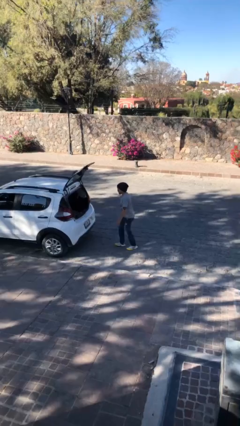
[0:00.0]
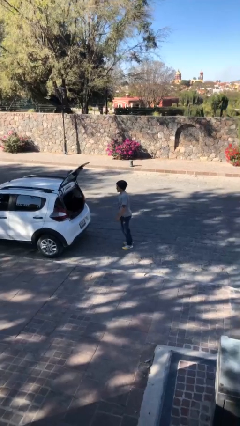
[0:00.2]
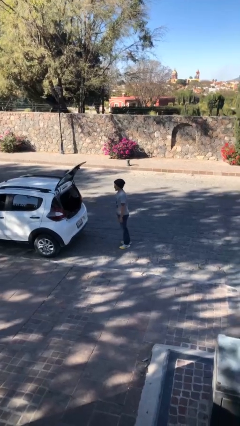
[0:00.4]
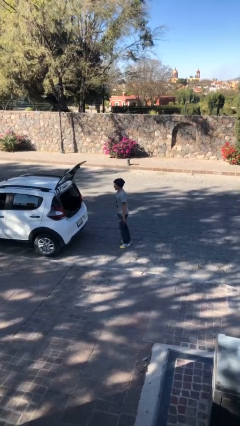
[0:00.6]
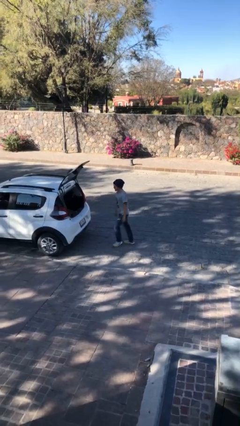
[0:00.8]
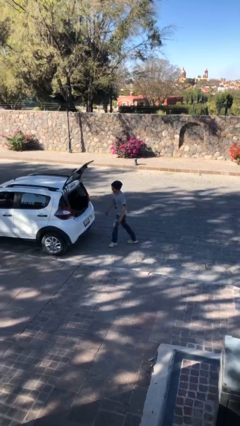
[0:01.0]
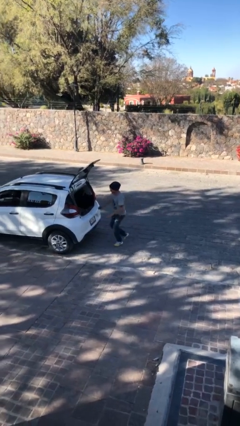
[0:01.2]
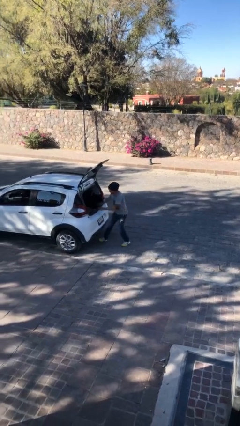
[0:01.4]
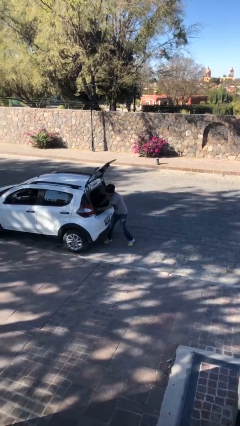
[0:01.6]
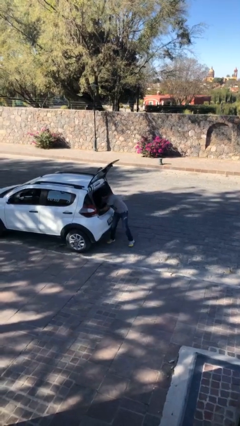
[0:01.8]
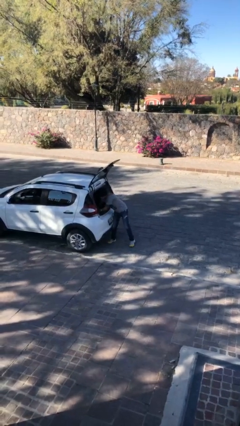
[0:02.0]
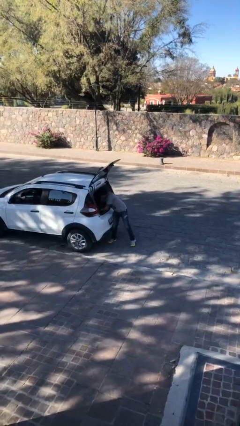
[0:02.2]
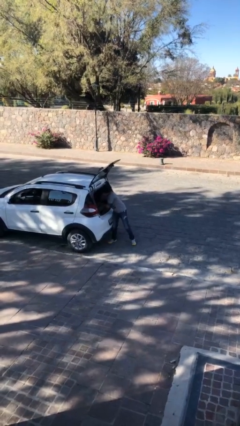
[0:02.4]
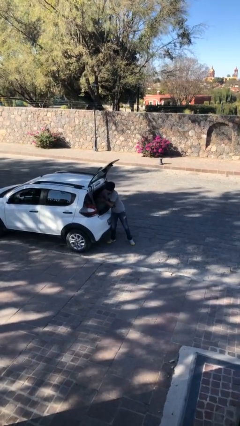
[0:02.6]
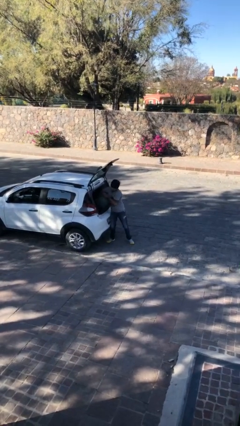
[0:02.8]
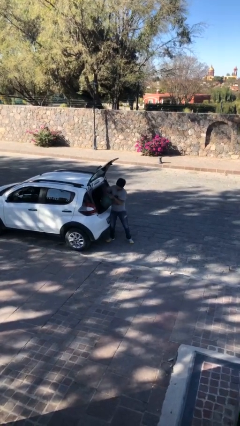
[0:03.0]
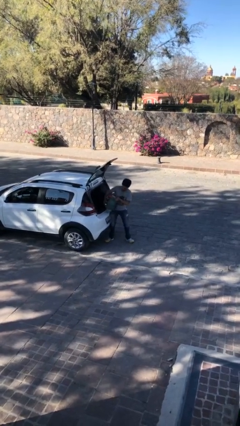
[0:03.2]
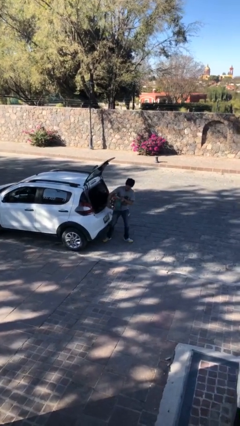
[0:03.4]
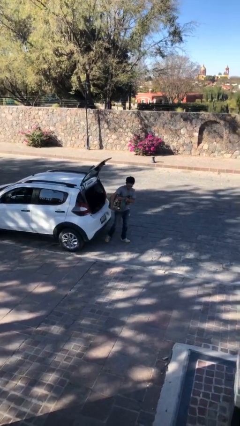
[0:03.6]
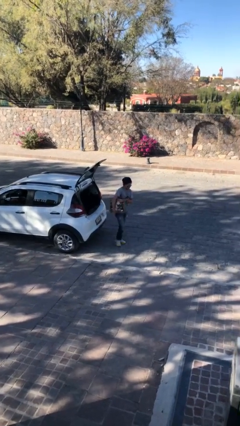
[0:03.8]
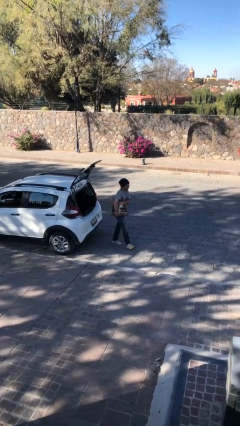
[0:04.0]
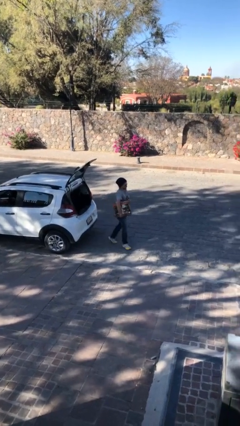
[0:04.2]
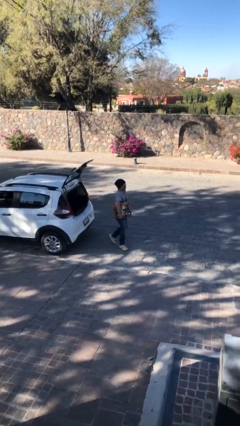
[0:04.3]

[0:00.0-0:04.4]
person unloads car

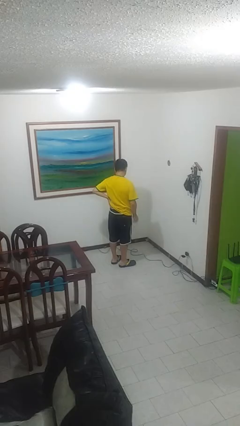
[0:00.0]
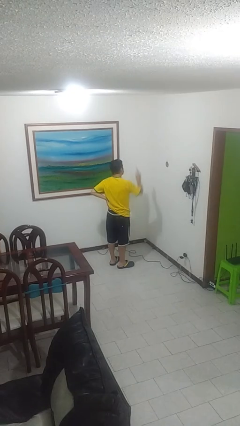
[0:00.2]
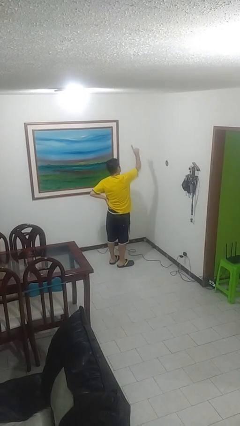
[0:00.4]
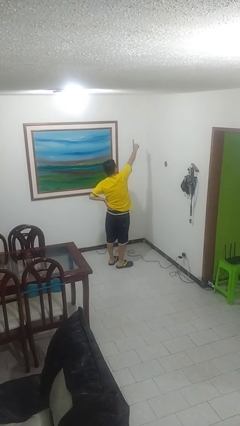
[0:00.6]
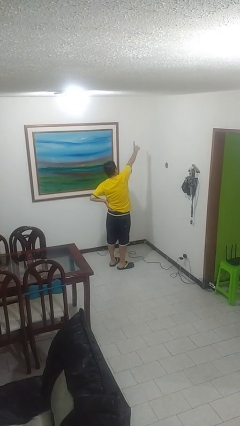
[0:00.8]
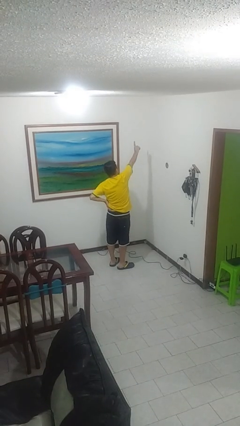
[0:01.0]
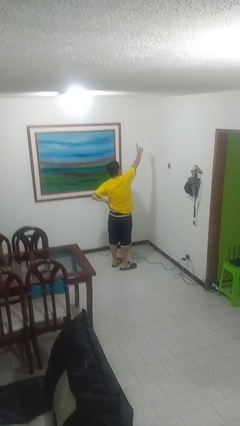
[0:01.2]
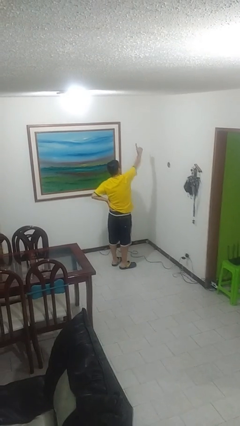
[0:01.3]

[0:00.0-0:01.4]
person gestures number one

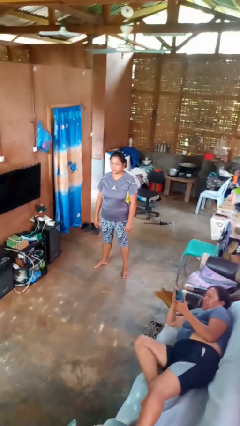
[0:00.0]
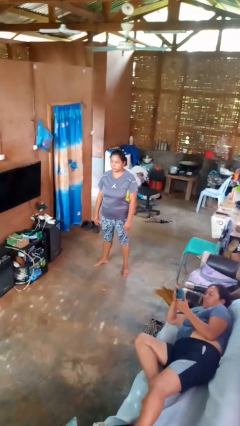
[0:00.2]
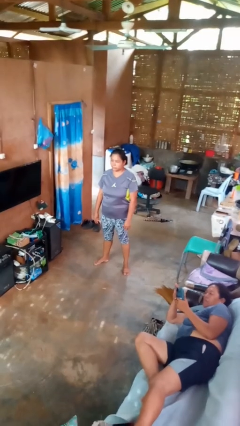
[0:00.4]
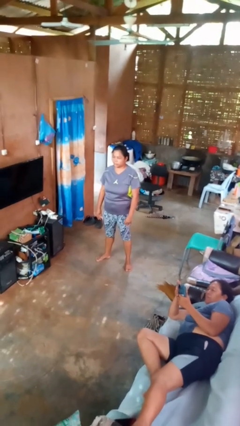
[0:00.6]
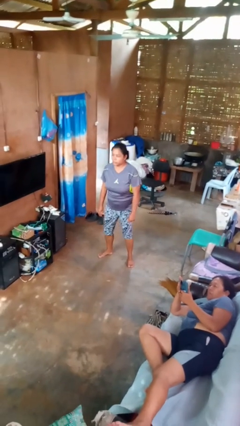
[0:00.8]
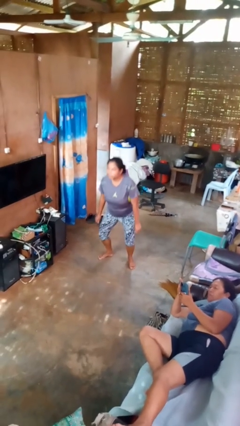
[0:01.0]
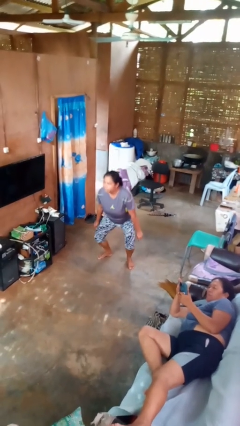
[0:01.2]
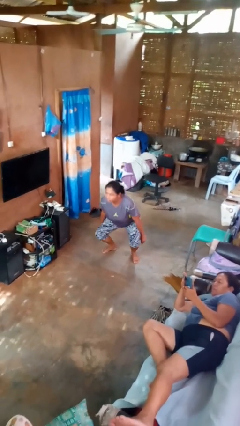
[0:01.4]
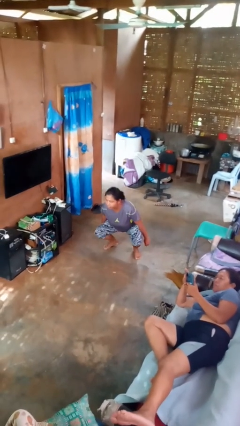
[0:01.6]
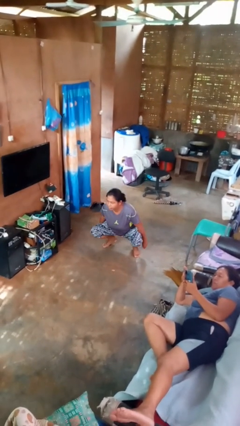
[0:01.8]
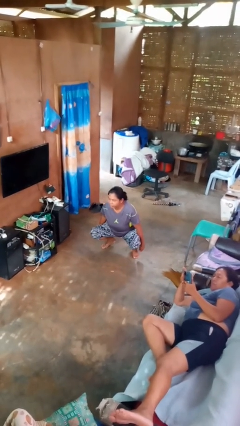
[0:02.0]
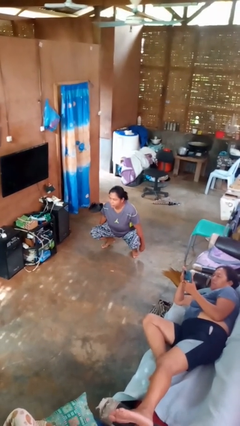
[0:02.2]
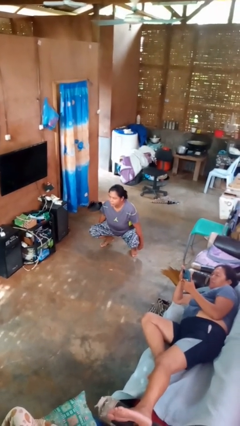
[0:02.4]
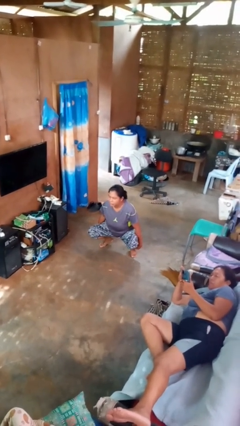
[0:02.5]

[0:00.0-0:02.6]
person squats

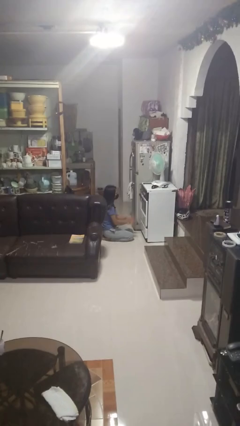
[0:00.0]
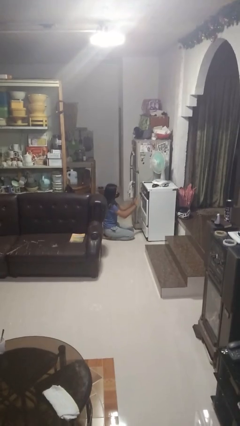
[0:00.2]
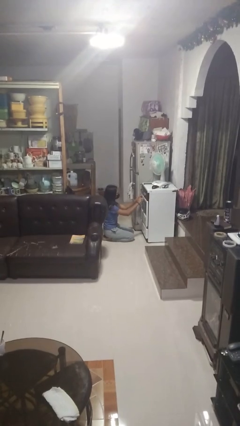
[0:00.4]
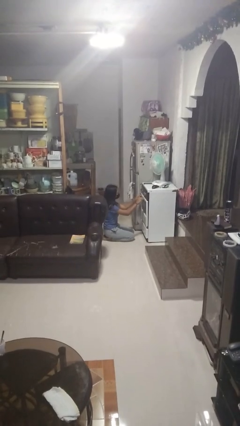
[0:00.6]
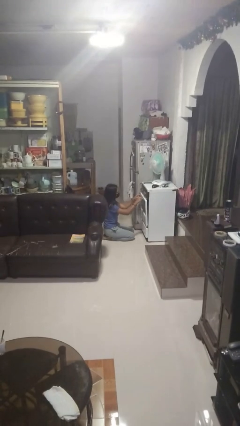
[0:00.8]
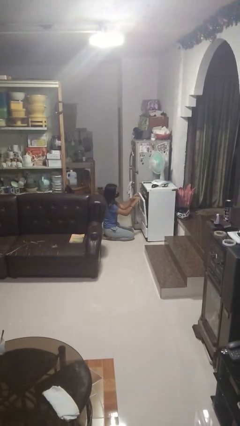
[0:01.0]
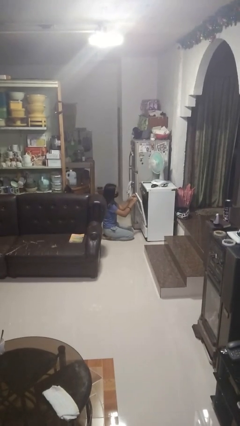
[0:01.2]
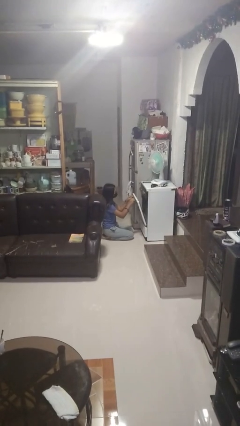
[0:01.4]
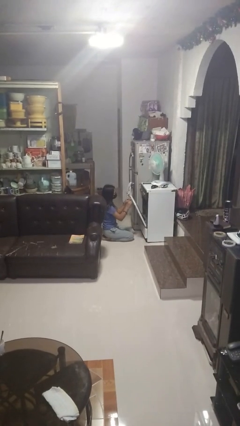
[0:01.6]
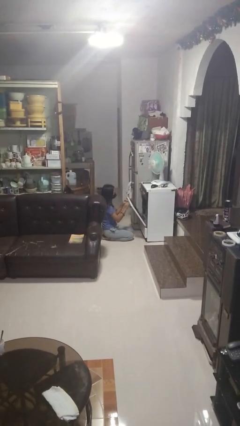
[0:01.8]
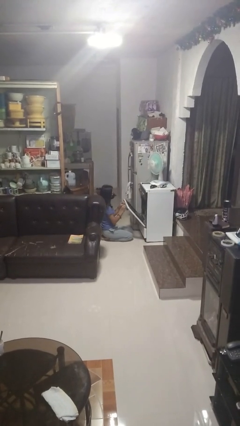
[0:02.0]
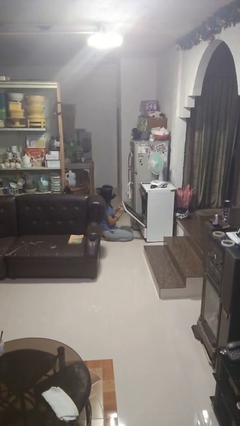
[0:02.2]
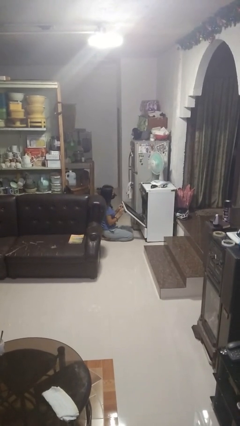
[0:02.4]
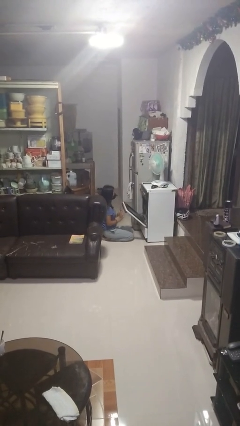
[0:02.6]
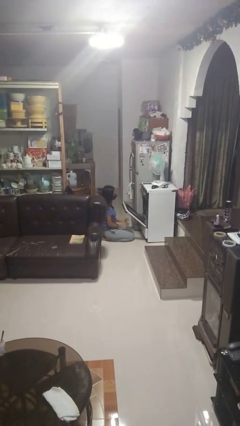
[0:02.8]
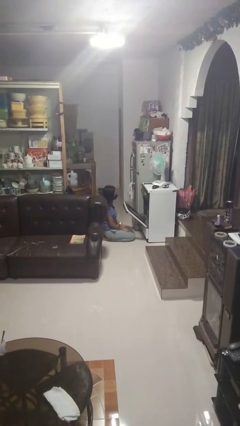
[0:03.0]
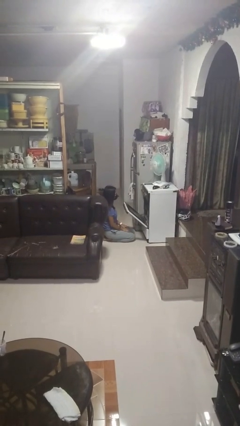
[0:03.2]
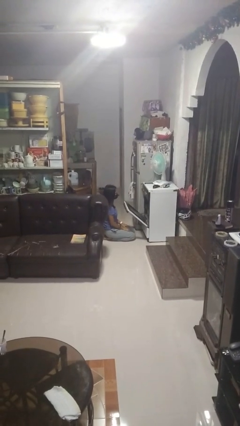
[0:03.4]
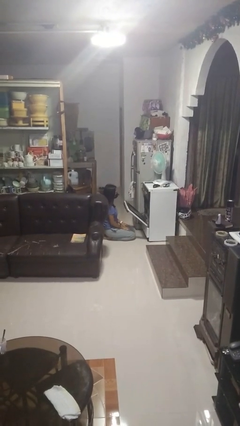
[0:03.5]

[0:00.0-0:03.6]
person opens oven door

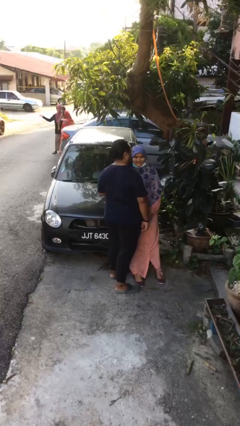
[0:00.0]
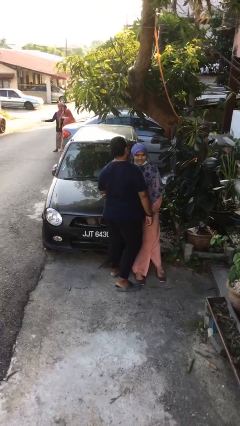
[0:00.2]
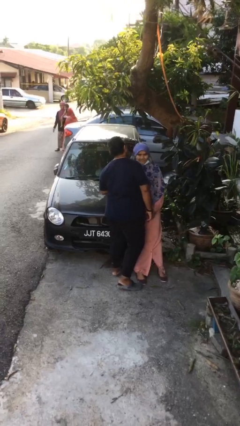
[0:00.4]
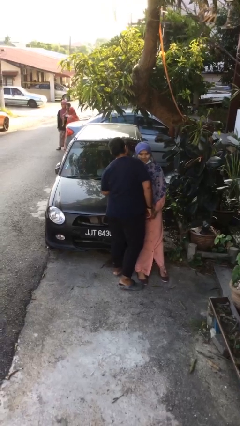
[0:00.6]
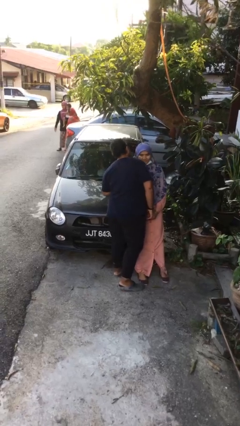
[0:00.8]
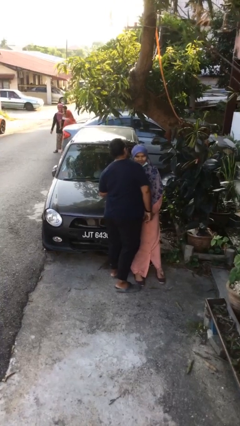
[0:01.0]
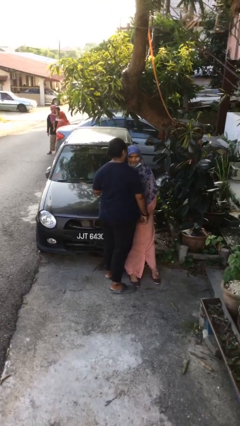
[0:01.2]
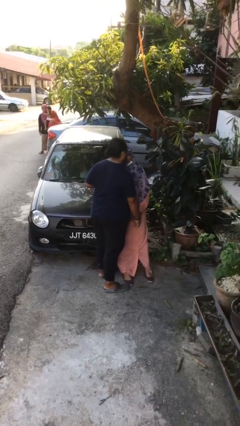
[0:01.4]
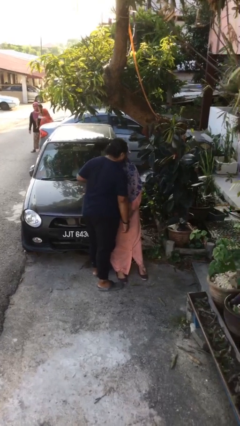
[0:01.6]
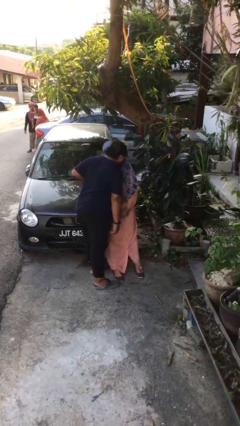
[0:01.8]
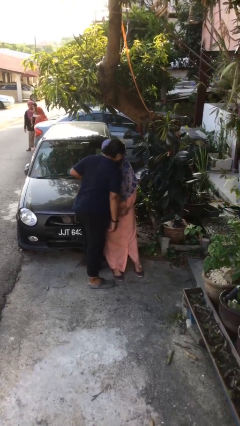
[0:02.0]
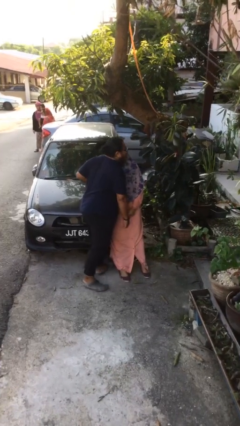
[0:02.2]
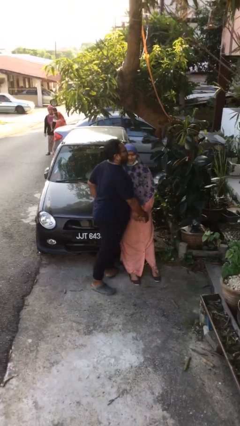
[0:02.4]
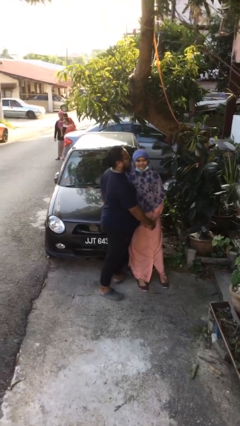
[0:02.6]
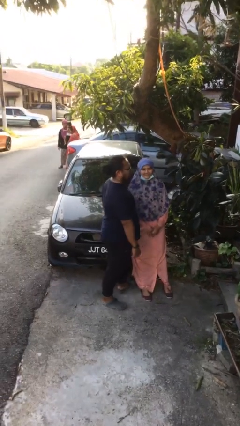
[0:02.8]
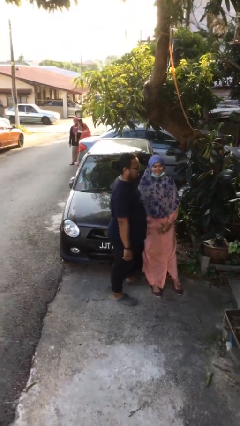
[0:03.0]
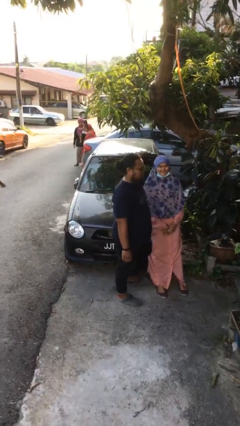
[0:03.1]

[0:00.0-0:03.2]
person kisses cheek of person

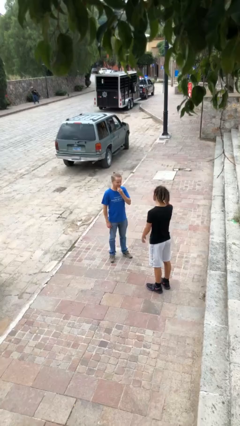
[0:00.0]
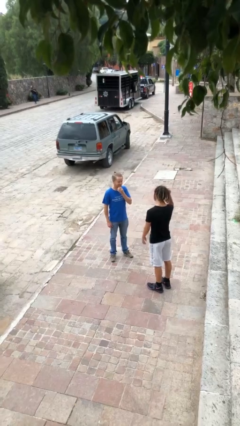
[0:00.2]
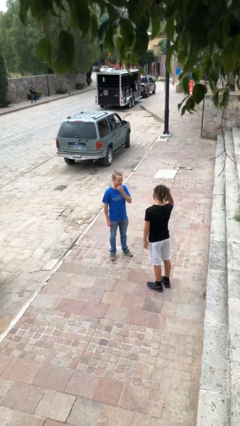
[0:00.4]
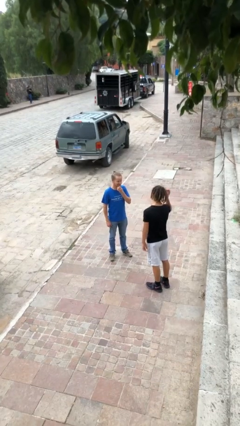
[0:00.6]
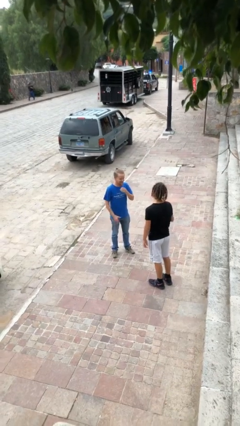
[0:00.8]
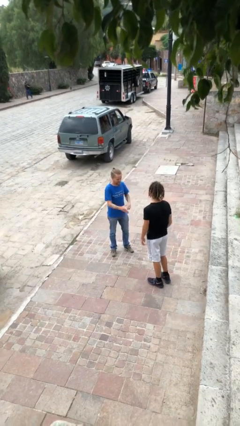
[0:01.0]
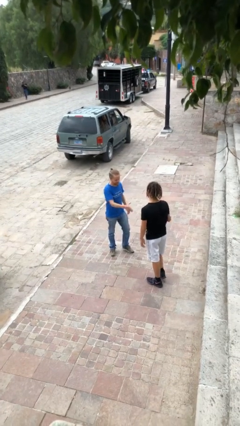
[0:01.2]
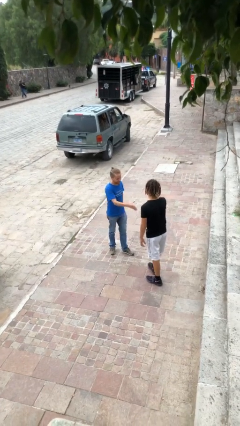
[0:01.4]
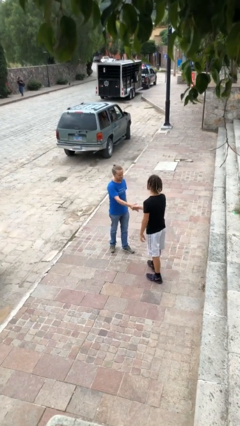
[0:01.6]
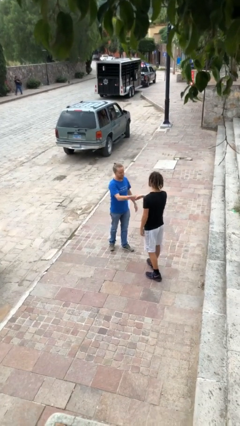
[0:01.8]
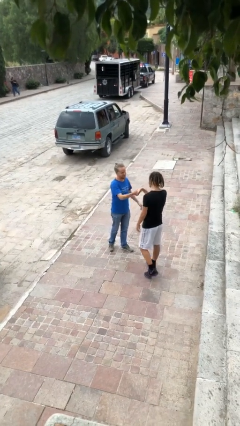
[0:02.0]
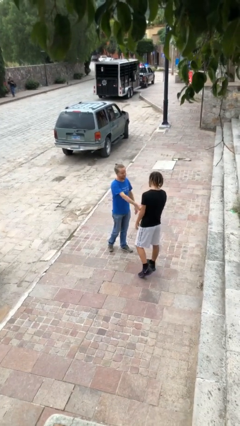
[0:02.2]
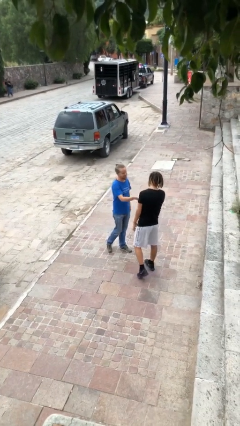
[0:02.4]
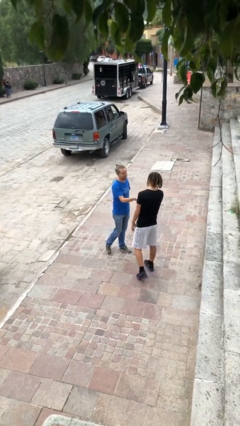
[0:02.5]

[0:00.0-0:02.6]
person shakes hand
